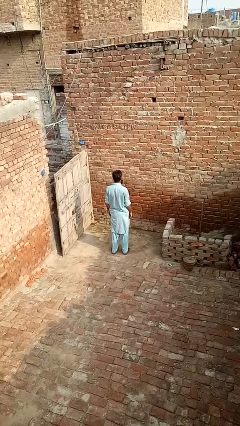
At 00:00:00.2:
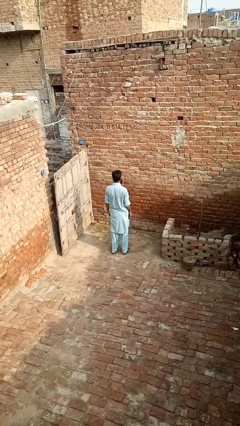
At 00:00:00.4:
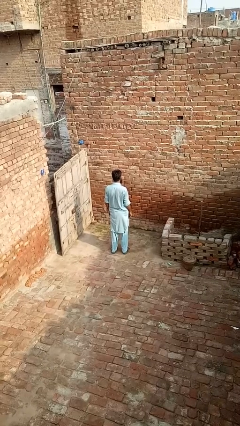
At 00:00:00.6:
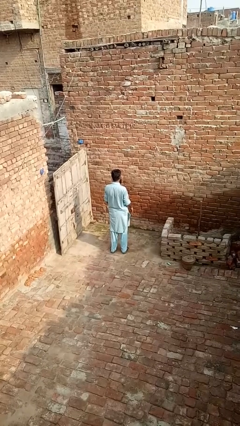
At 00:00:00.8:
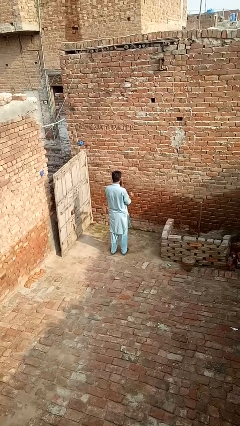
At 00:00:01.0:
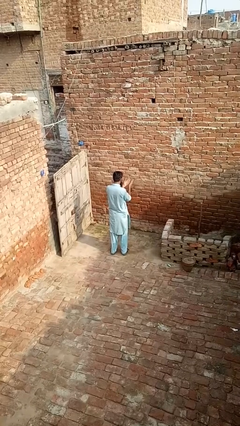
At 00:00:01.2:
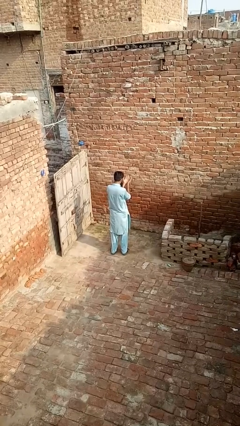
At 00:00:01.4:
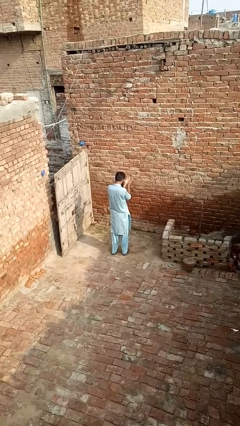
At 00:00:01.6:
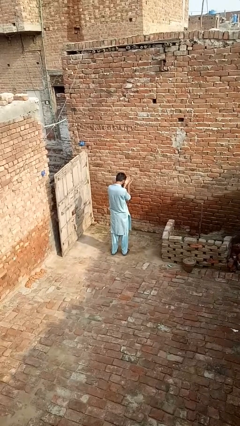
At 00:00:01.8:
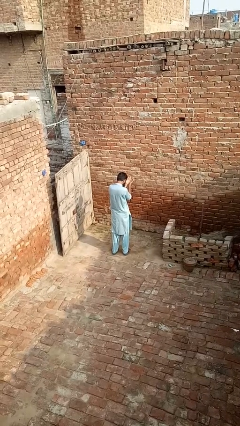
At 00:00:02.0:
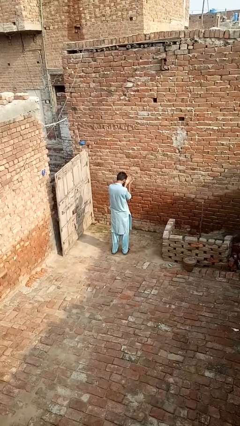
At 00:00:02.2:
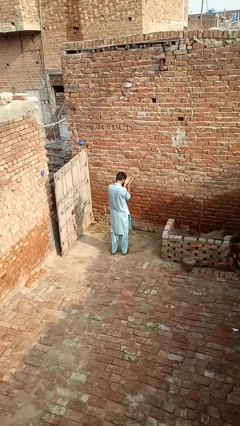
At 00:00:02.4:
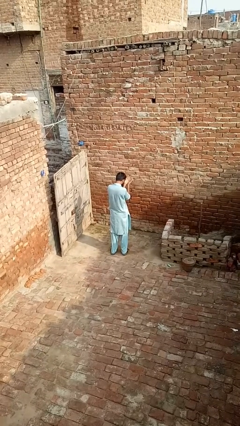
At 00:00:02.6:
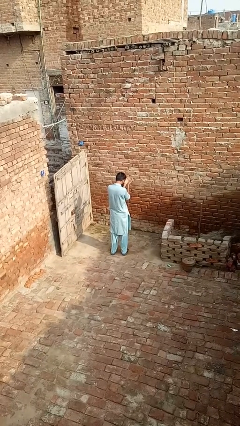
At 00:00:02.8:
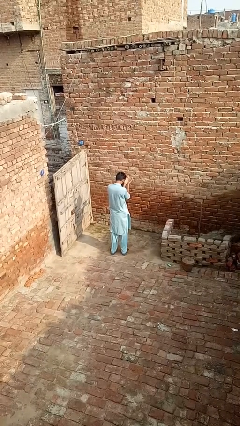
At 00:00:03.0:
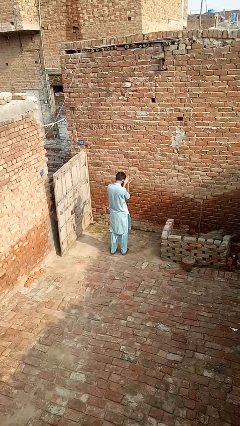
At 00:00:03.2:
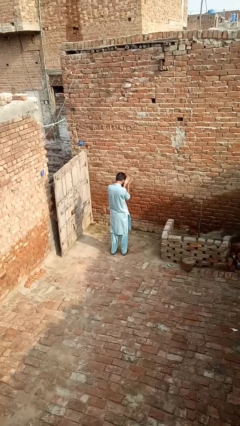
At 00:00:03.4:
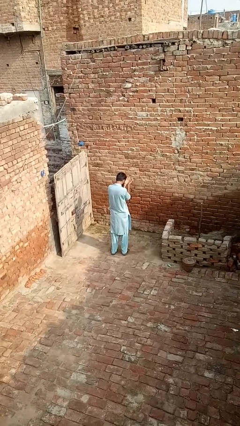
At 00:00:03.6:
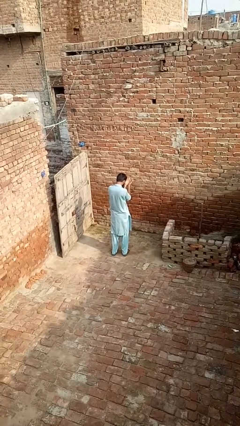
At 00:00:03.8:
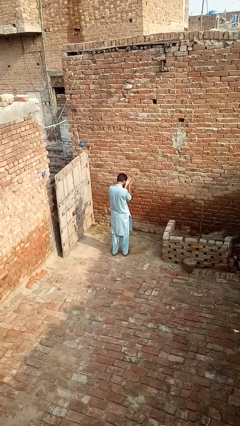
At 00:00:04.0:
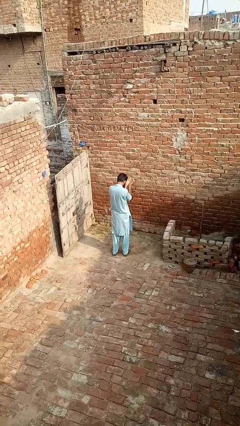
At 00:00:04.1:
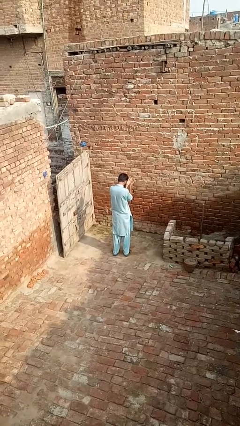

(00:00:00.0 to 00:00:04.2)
person prays

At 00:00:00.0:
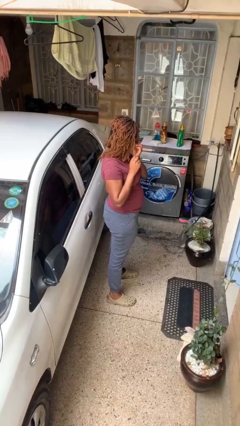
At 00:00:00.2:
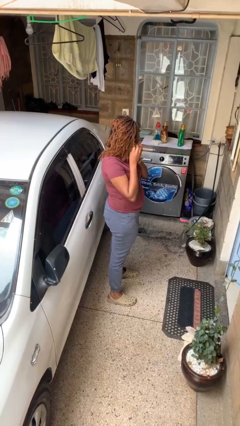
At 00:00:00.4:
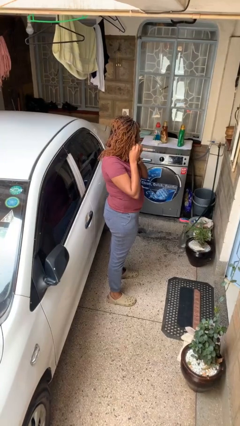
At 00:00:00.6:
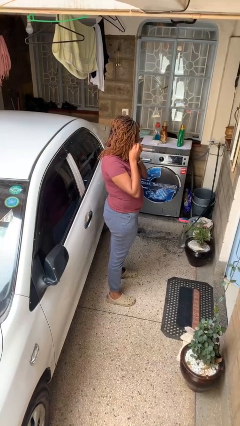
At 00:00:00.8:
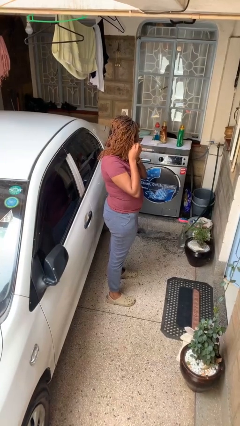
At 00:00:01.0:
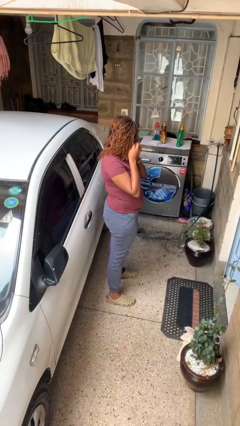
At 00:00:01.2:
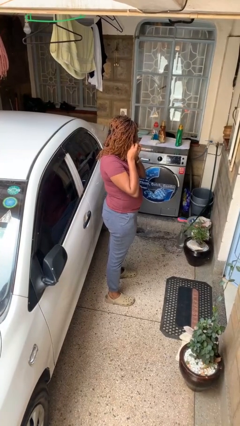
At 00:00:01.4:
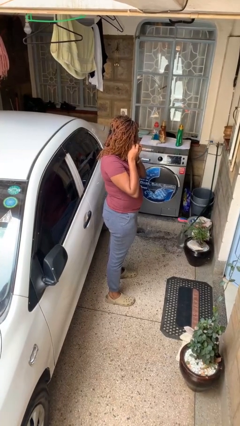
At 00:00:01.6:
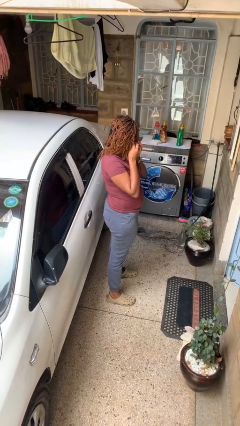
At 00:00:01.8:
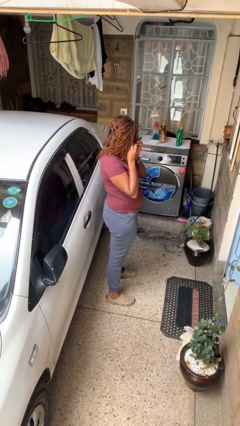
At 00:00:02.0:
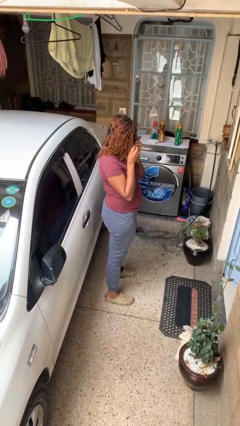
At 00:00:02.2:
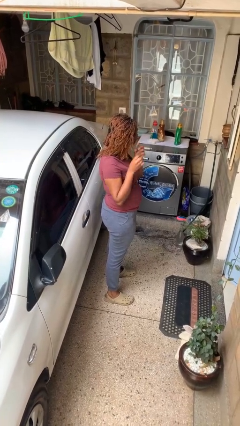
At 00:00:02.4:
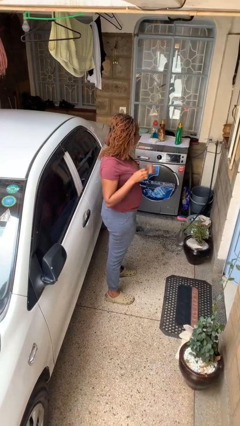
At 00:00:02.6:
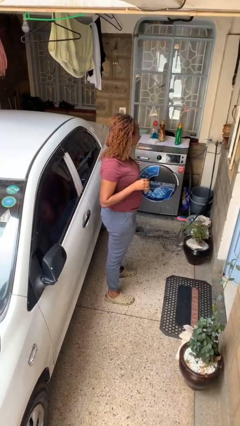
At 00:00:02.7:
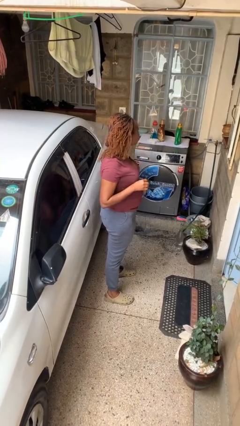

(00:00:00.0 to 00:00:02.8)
person takes off earrings

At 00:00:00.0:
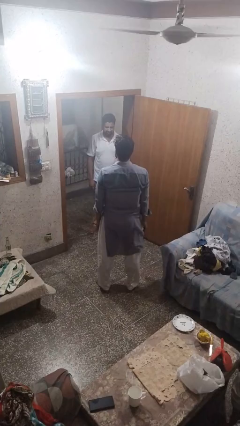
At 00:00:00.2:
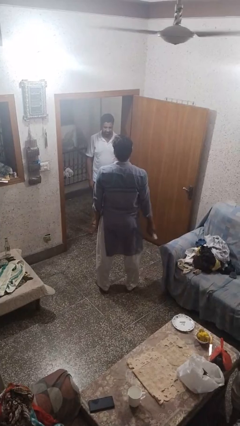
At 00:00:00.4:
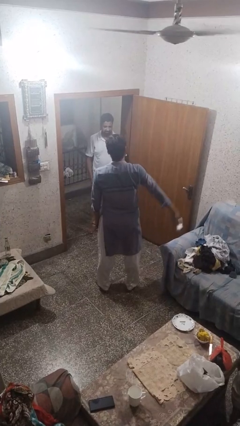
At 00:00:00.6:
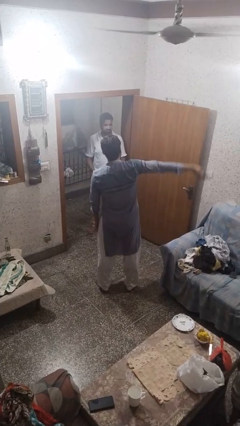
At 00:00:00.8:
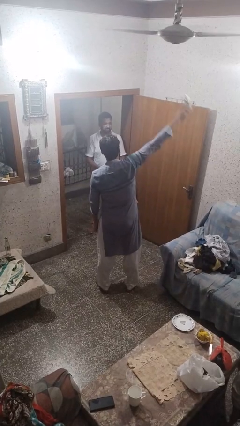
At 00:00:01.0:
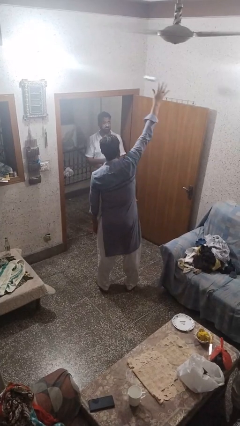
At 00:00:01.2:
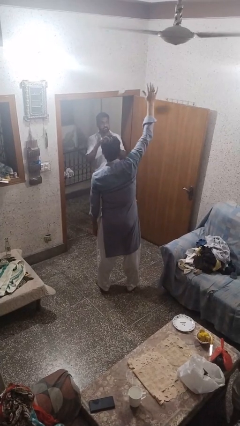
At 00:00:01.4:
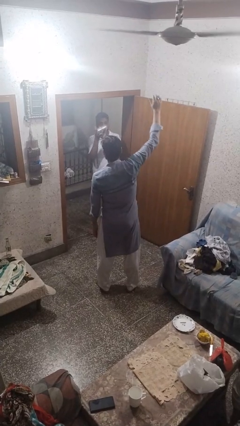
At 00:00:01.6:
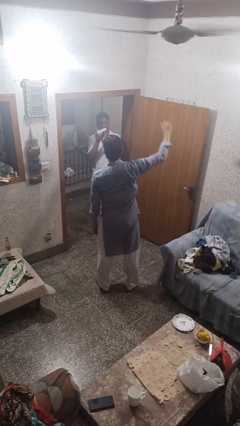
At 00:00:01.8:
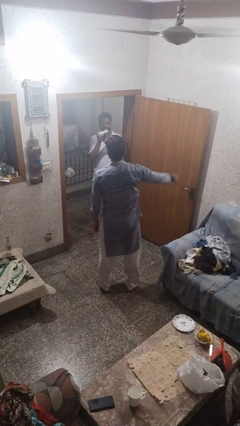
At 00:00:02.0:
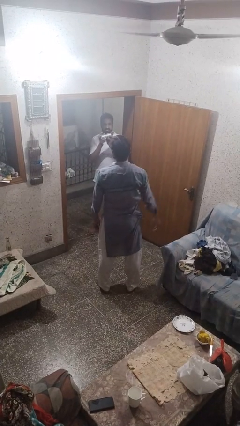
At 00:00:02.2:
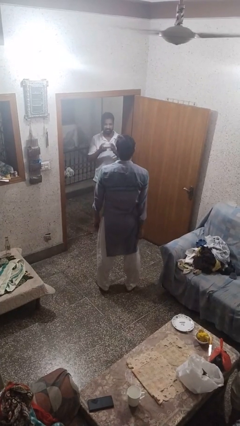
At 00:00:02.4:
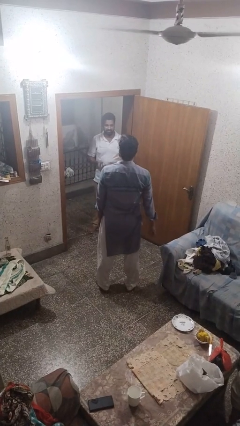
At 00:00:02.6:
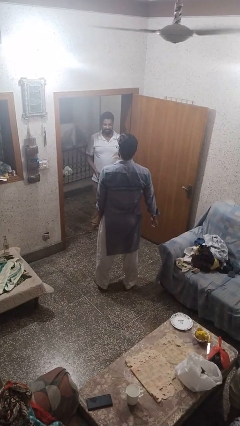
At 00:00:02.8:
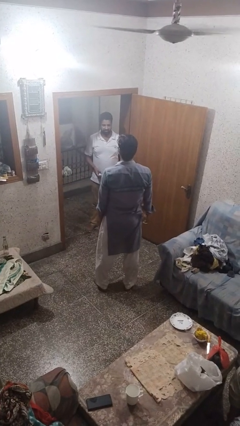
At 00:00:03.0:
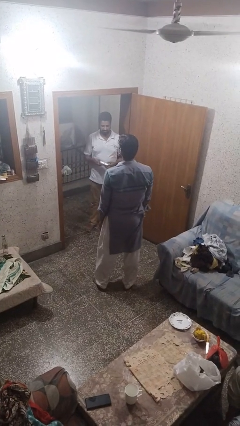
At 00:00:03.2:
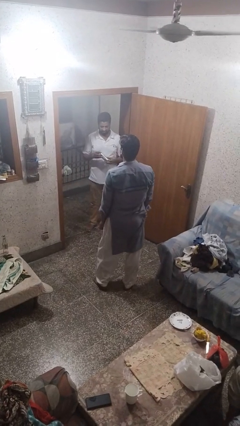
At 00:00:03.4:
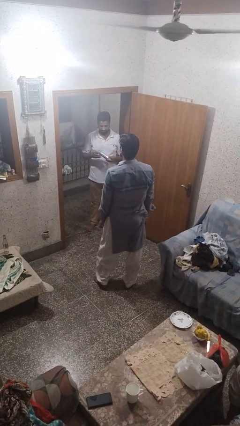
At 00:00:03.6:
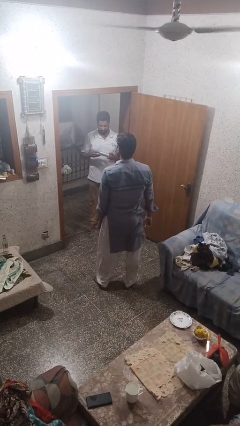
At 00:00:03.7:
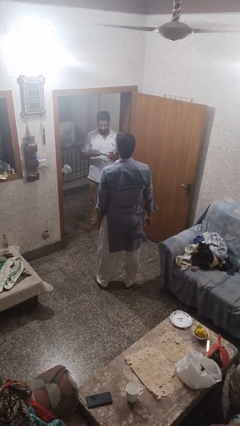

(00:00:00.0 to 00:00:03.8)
person throws object to person

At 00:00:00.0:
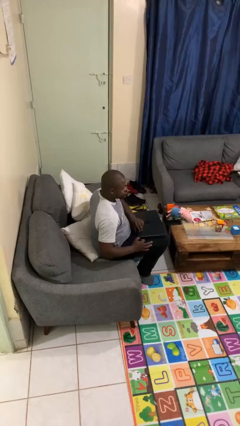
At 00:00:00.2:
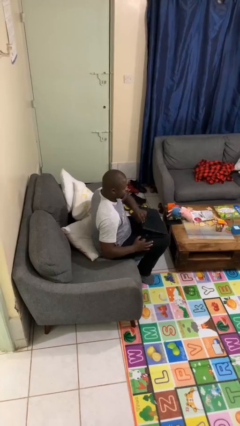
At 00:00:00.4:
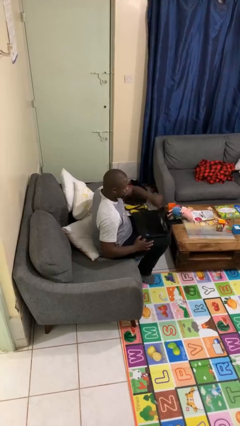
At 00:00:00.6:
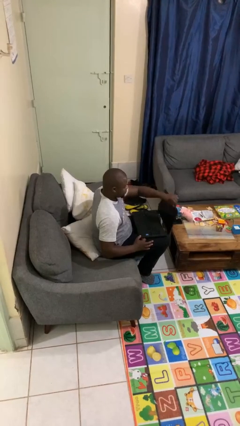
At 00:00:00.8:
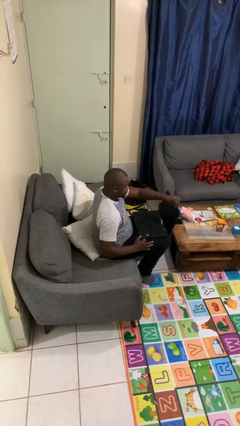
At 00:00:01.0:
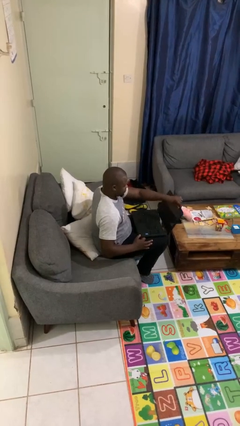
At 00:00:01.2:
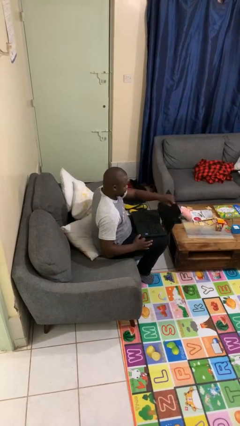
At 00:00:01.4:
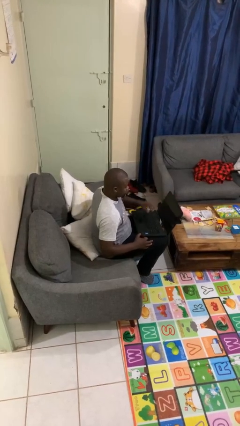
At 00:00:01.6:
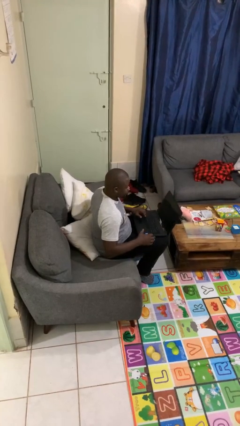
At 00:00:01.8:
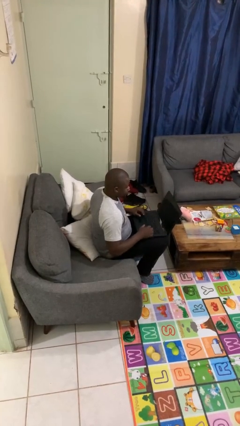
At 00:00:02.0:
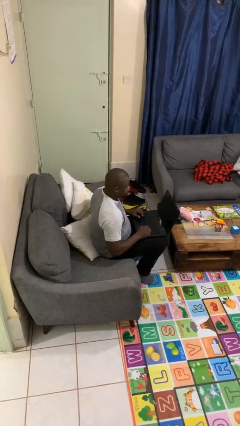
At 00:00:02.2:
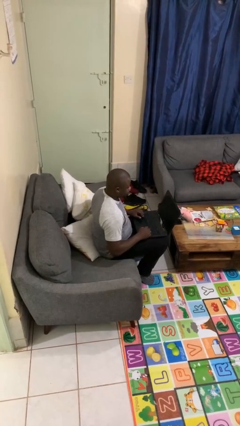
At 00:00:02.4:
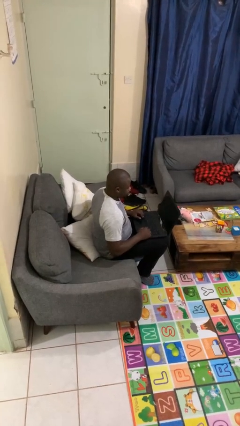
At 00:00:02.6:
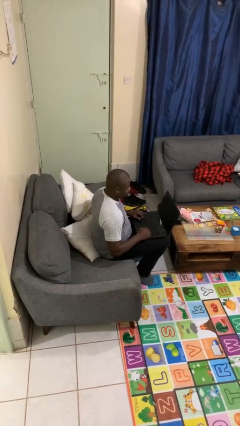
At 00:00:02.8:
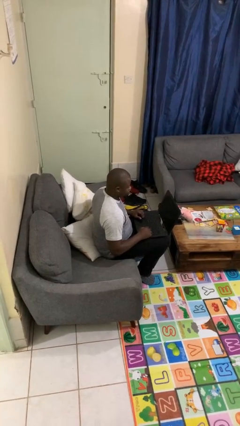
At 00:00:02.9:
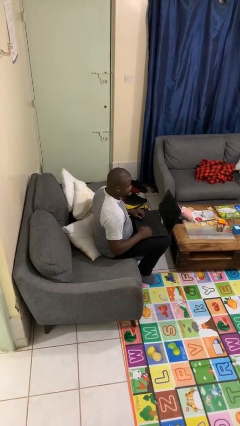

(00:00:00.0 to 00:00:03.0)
person opens laptop

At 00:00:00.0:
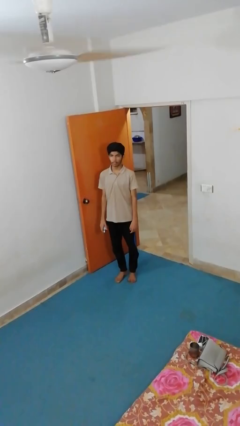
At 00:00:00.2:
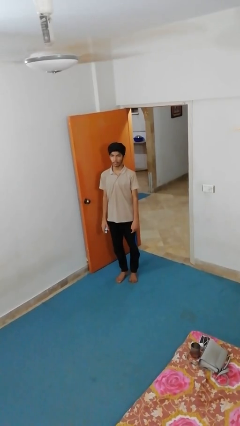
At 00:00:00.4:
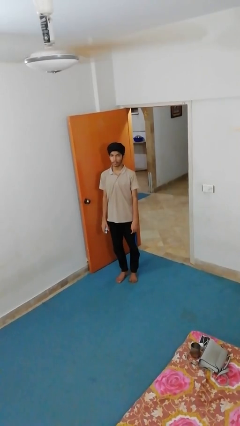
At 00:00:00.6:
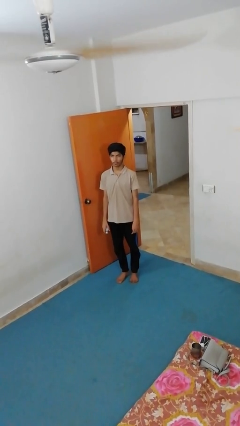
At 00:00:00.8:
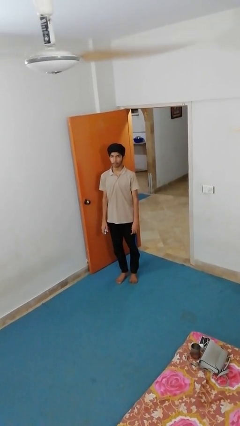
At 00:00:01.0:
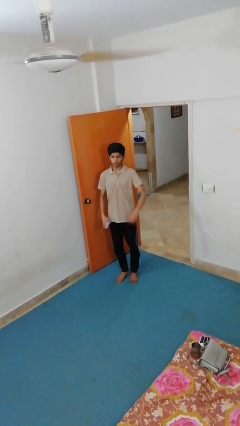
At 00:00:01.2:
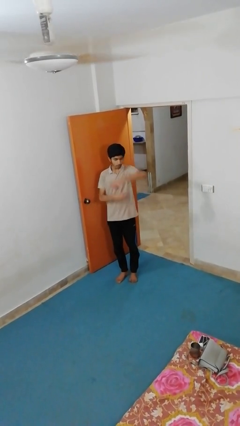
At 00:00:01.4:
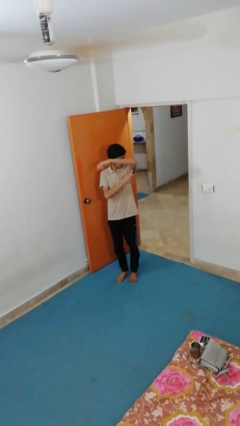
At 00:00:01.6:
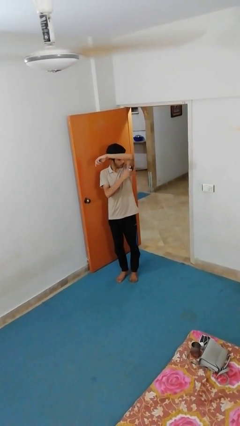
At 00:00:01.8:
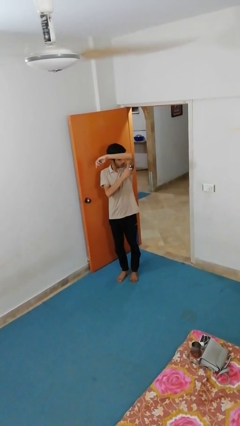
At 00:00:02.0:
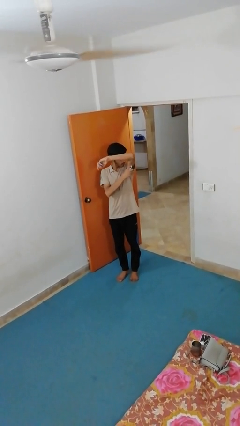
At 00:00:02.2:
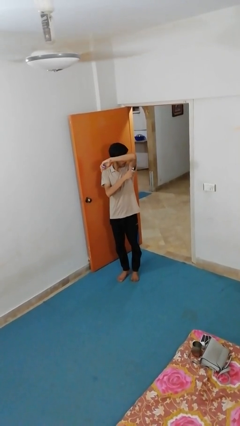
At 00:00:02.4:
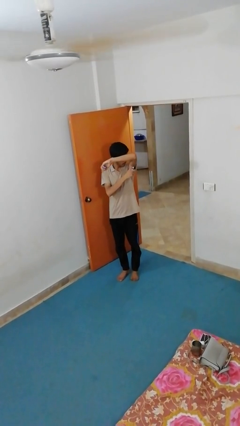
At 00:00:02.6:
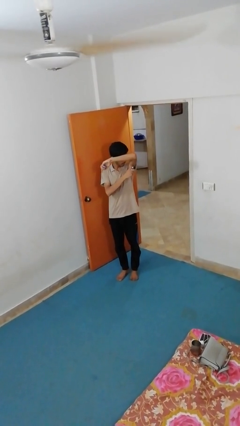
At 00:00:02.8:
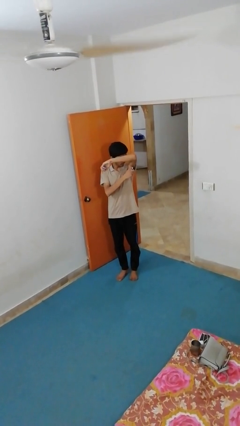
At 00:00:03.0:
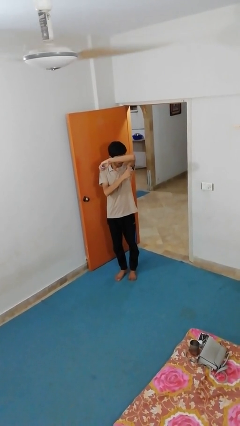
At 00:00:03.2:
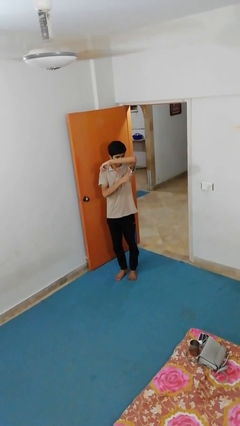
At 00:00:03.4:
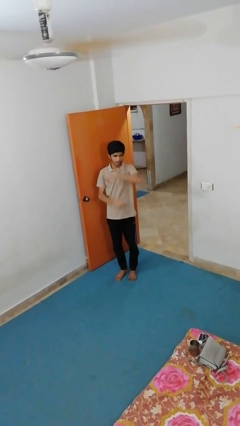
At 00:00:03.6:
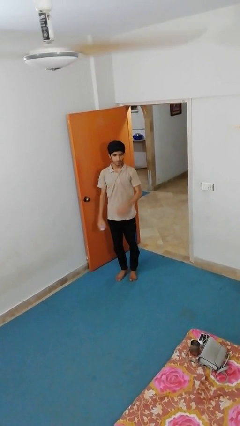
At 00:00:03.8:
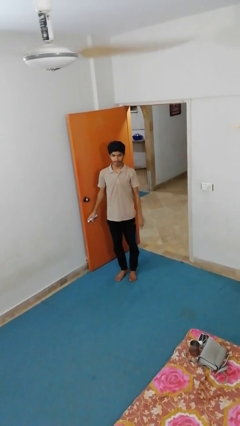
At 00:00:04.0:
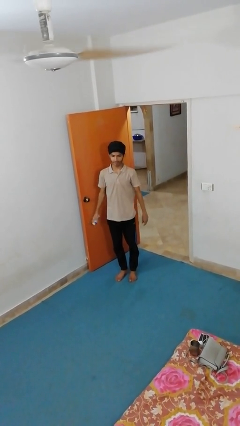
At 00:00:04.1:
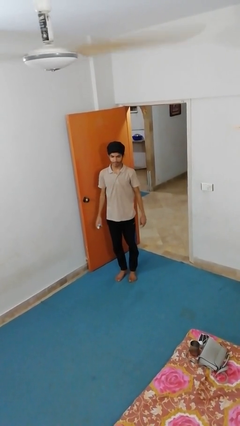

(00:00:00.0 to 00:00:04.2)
person applies deodorant
